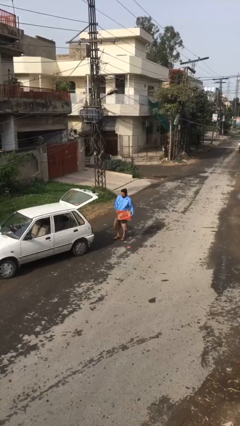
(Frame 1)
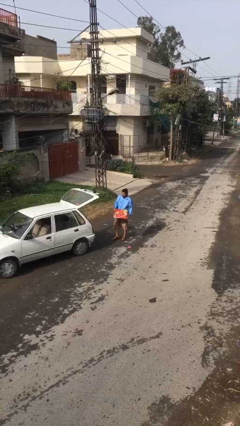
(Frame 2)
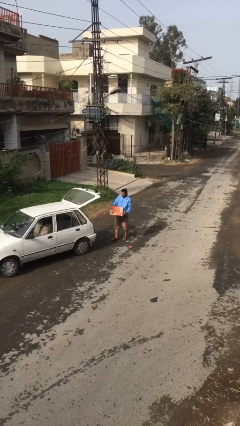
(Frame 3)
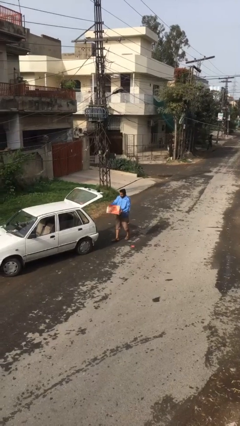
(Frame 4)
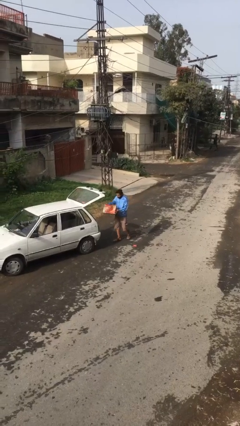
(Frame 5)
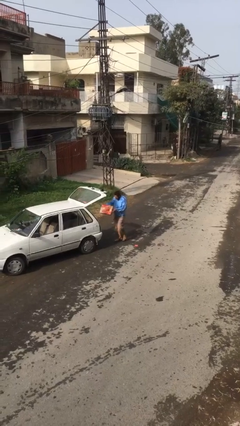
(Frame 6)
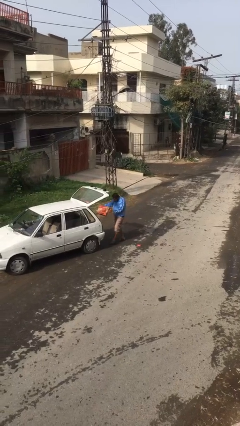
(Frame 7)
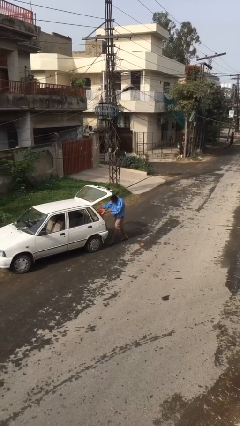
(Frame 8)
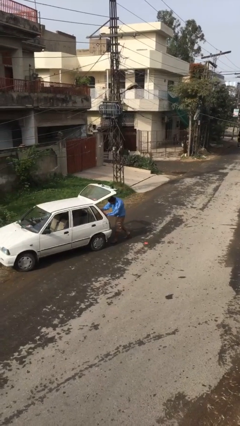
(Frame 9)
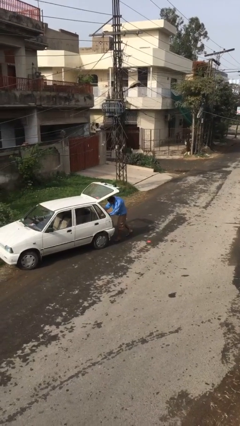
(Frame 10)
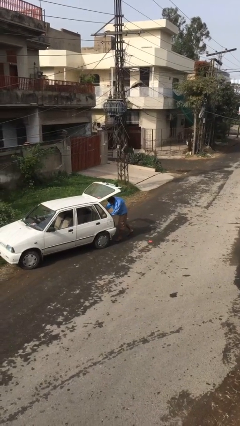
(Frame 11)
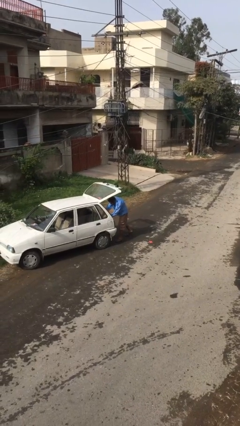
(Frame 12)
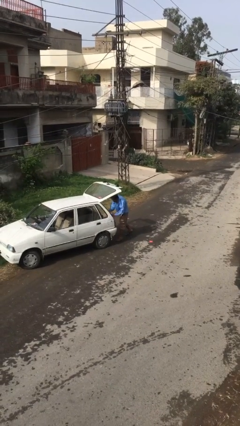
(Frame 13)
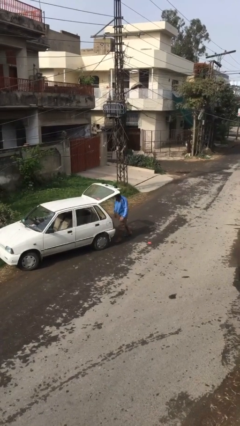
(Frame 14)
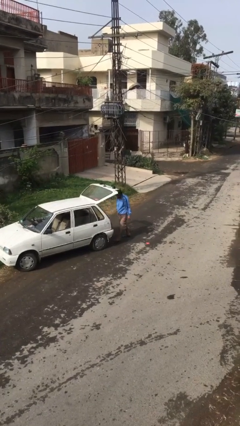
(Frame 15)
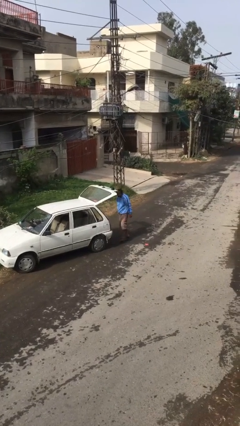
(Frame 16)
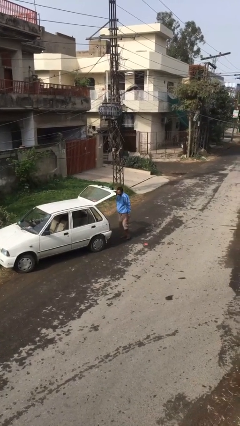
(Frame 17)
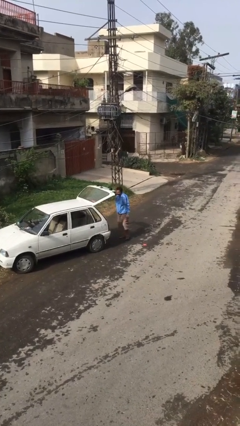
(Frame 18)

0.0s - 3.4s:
person loads car

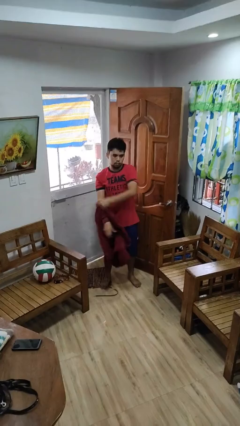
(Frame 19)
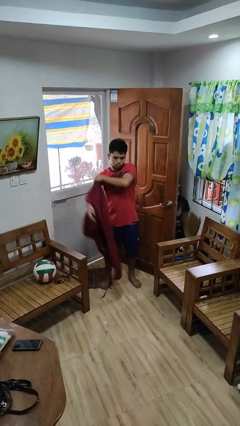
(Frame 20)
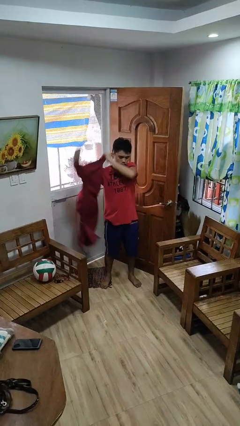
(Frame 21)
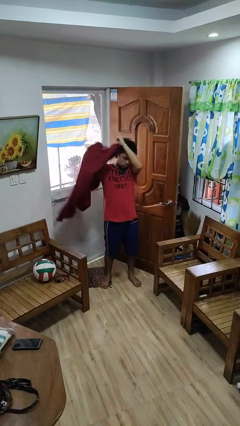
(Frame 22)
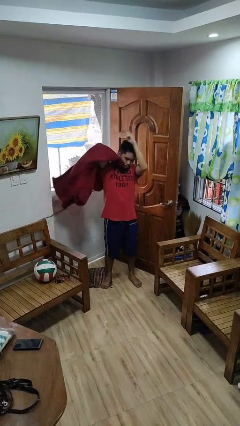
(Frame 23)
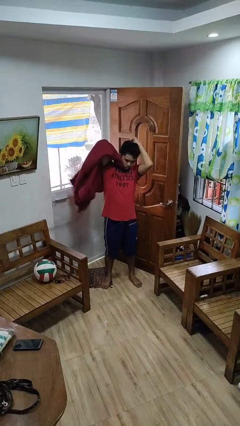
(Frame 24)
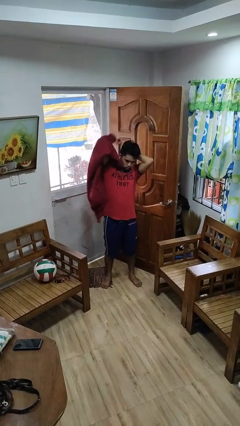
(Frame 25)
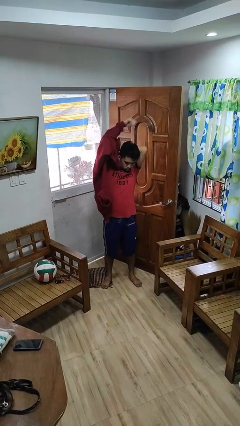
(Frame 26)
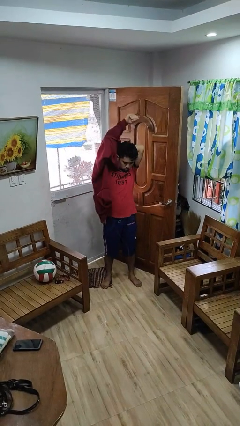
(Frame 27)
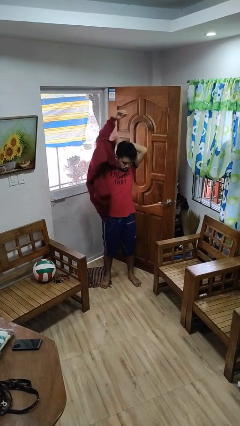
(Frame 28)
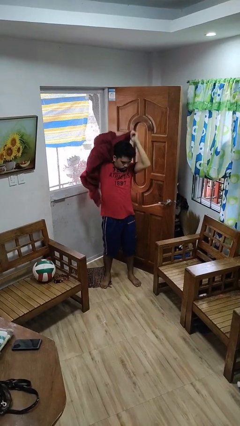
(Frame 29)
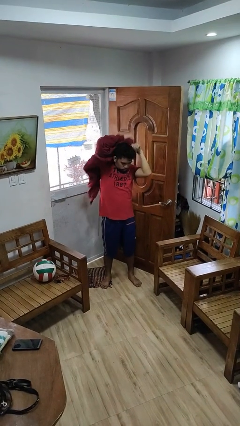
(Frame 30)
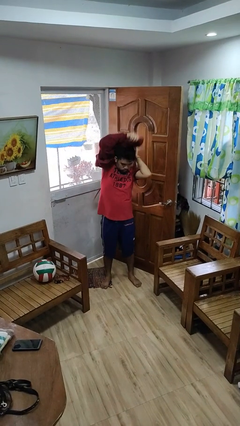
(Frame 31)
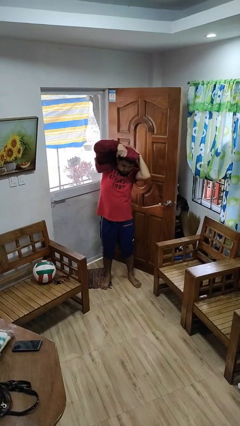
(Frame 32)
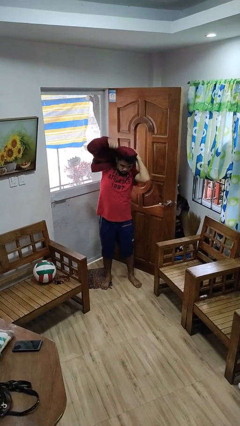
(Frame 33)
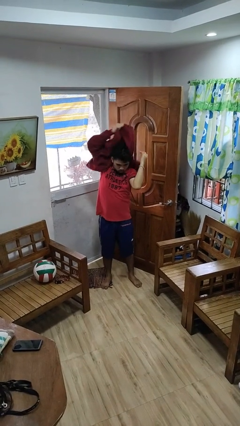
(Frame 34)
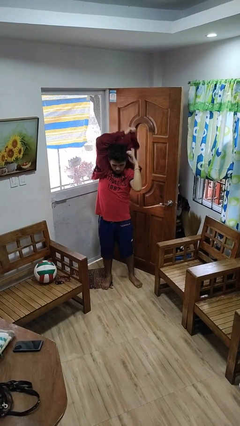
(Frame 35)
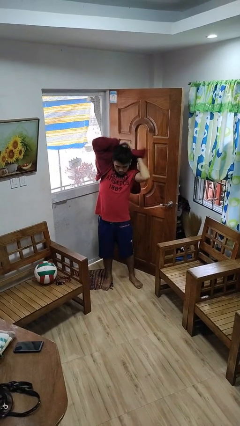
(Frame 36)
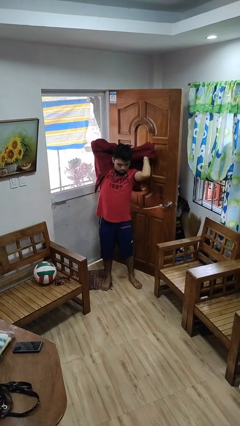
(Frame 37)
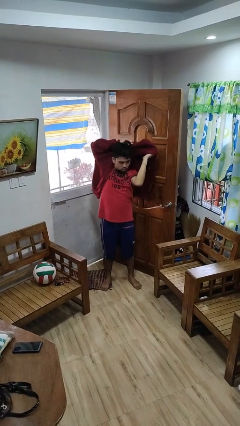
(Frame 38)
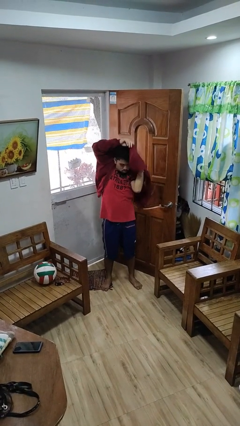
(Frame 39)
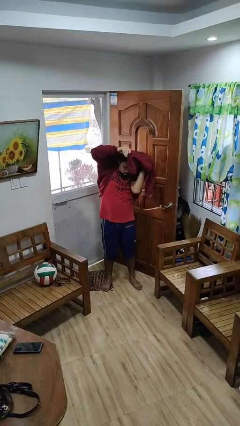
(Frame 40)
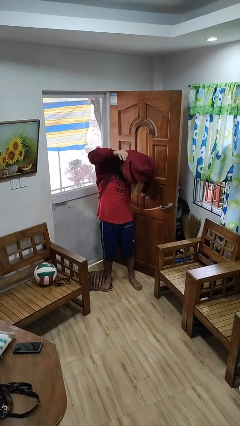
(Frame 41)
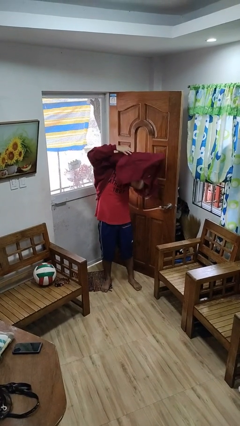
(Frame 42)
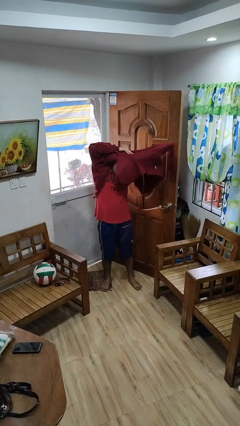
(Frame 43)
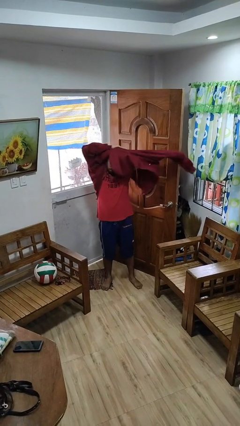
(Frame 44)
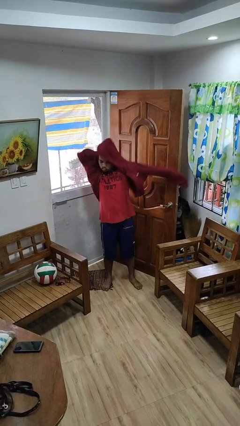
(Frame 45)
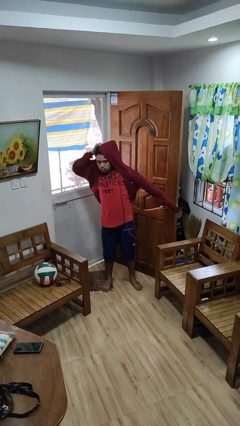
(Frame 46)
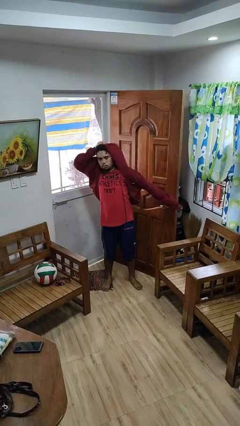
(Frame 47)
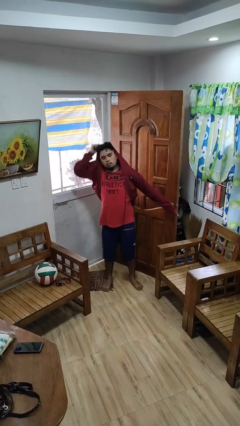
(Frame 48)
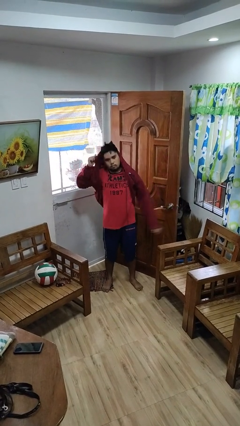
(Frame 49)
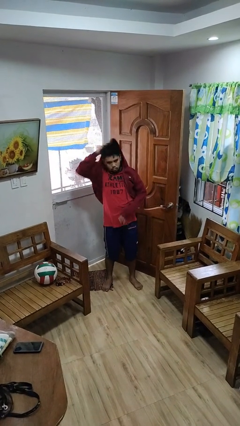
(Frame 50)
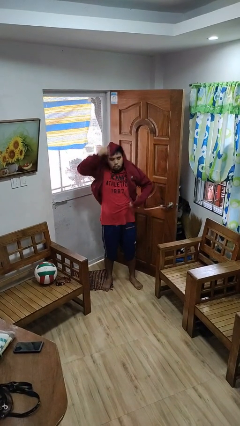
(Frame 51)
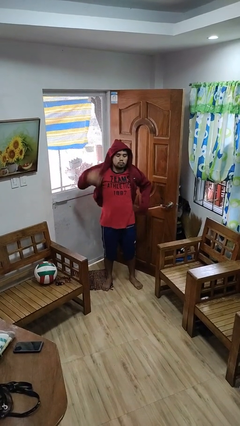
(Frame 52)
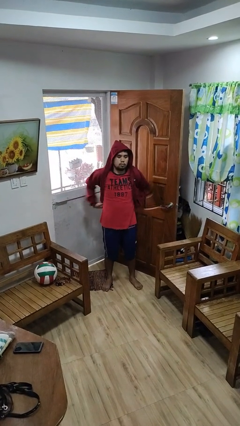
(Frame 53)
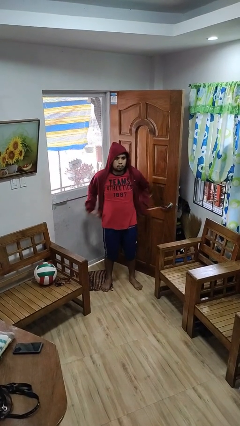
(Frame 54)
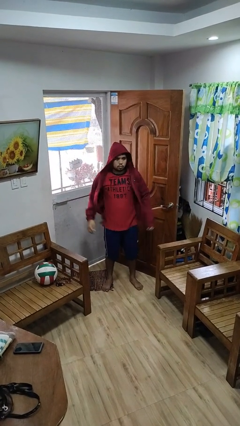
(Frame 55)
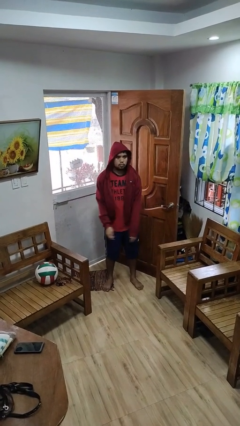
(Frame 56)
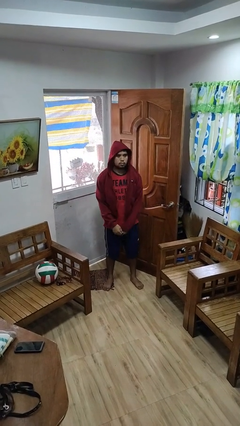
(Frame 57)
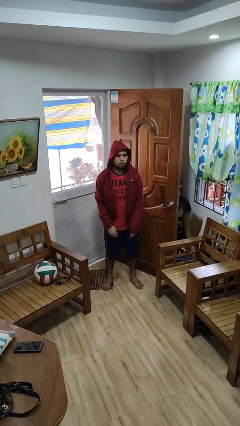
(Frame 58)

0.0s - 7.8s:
person puts on hoodie

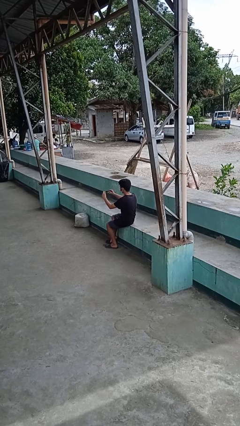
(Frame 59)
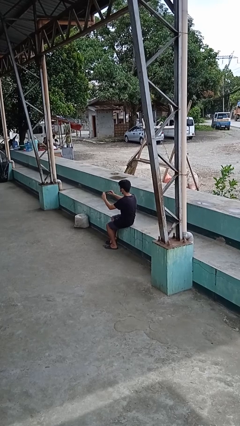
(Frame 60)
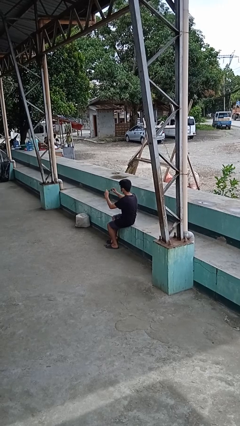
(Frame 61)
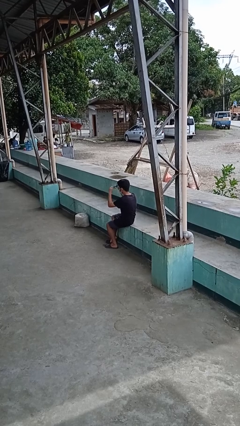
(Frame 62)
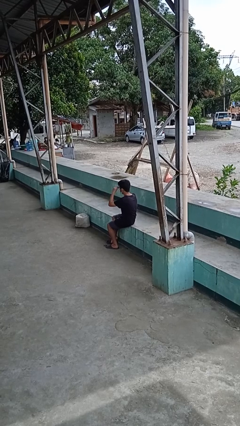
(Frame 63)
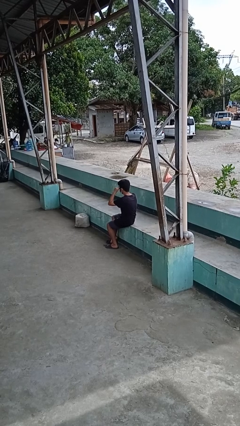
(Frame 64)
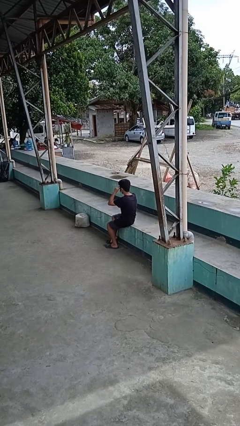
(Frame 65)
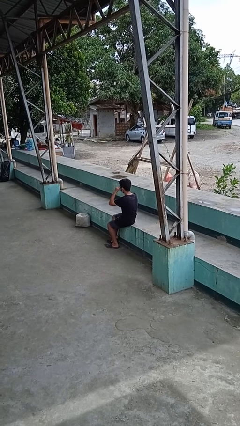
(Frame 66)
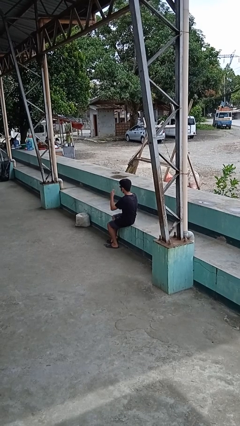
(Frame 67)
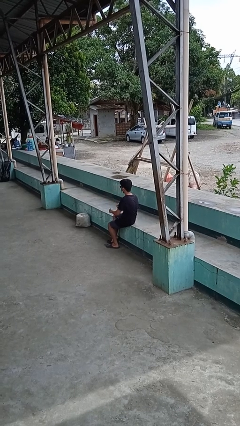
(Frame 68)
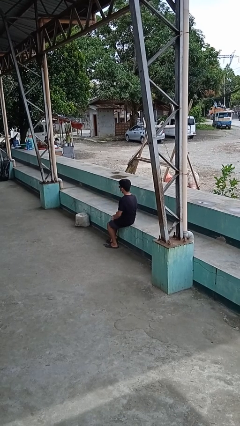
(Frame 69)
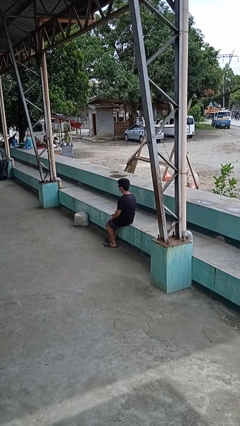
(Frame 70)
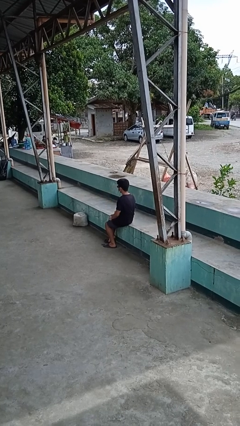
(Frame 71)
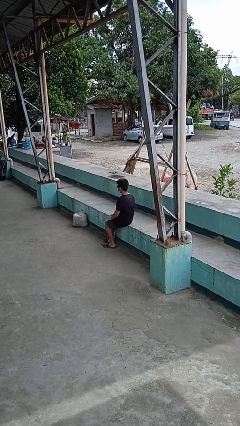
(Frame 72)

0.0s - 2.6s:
person puts on sunglasses

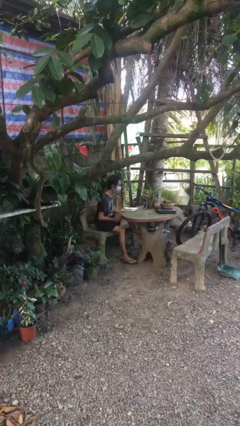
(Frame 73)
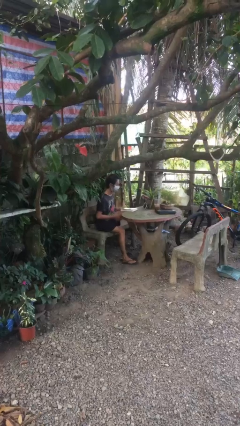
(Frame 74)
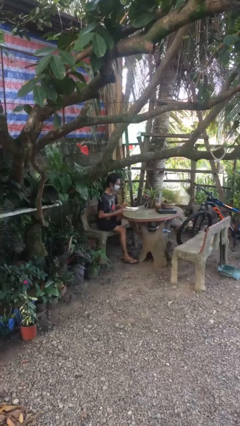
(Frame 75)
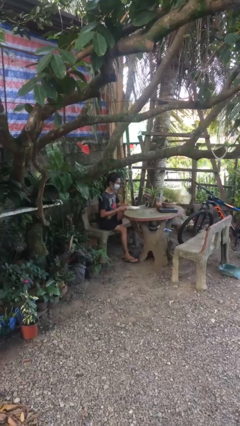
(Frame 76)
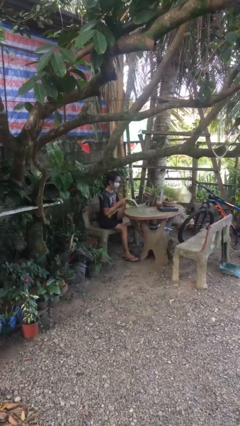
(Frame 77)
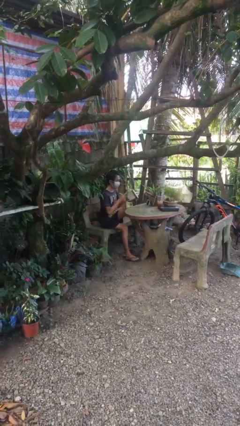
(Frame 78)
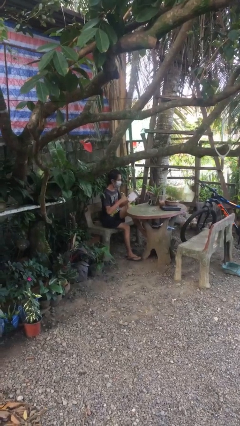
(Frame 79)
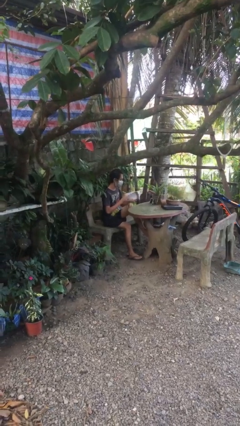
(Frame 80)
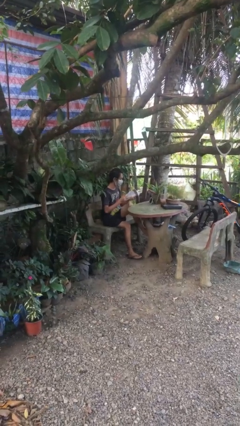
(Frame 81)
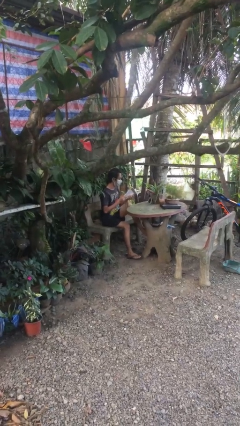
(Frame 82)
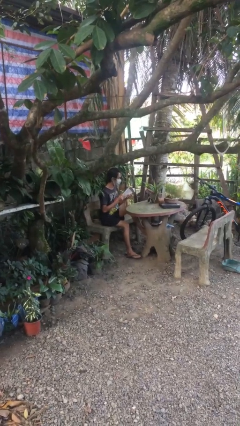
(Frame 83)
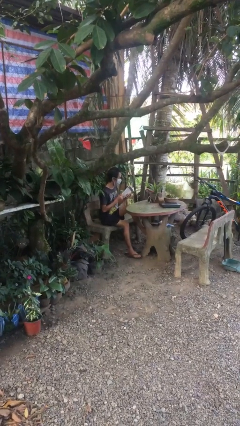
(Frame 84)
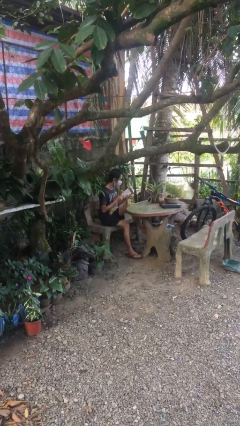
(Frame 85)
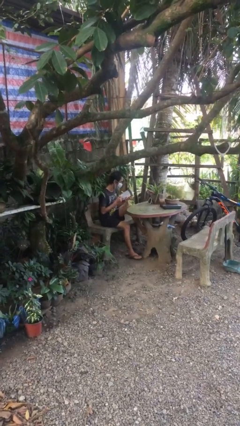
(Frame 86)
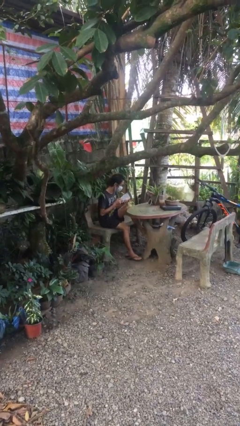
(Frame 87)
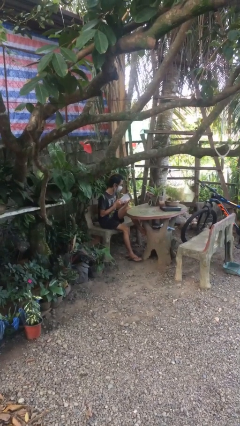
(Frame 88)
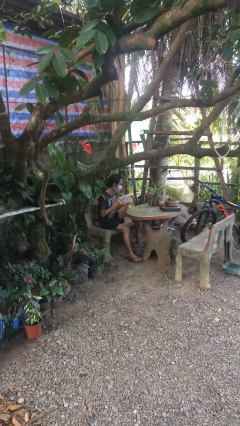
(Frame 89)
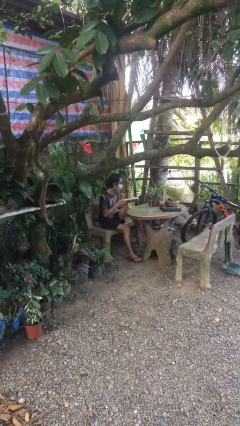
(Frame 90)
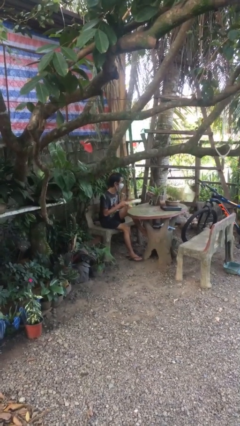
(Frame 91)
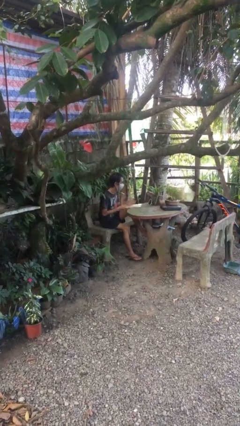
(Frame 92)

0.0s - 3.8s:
person reads document
